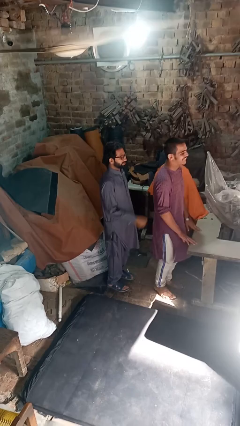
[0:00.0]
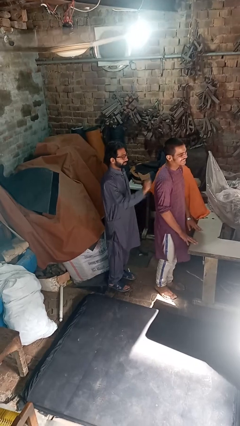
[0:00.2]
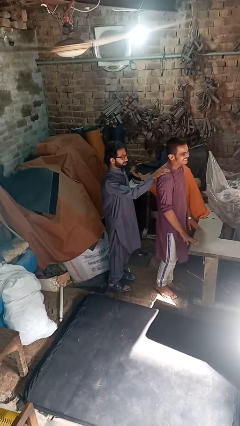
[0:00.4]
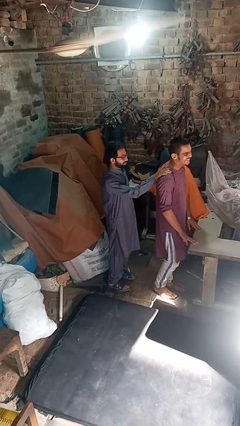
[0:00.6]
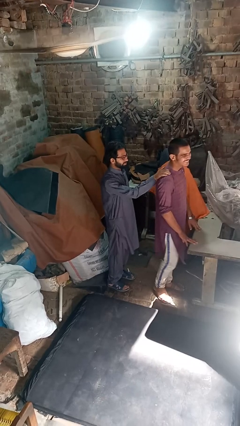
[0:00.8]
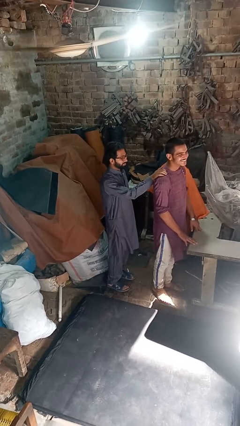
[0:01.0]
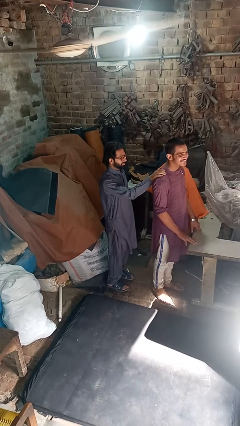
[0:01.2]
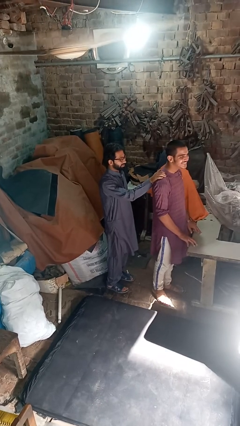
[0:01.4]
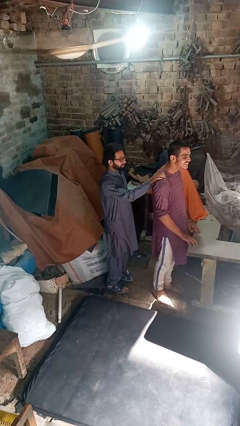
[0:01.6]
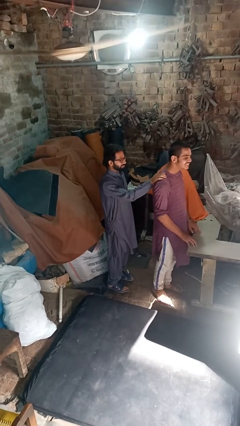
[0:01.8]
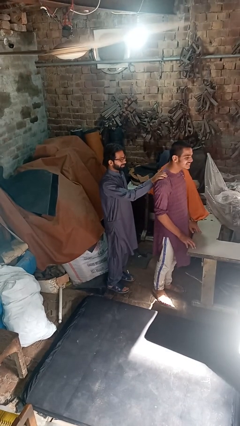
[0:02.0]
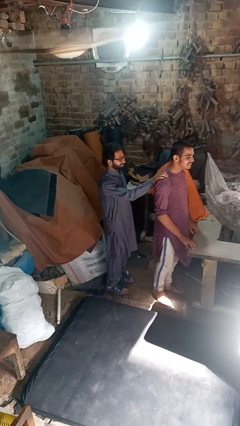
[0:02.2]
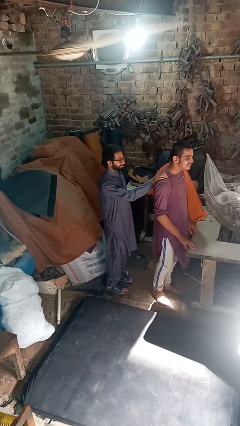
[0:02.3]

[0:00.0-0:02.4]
person grabs person by shoulder

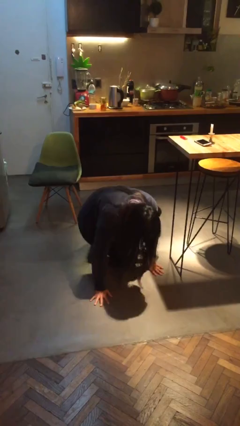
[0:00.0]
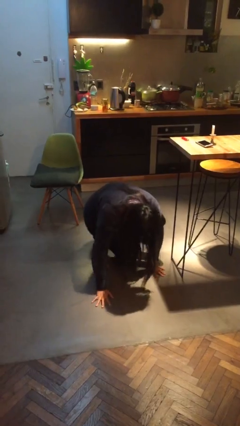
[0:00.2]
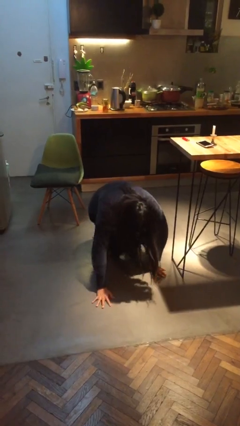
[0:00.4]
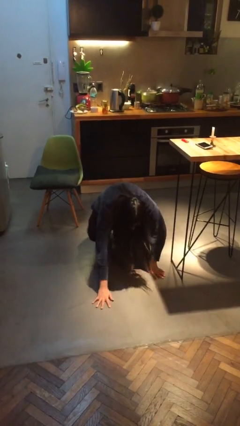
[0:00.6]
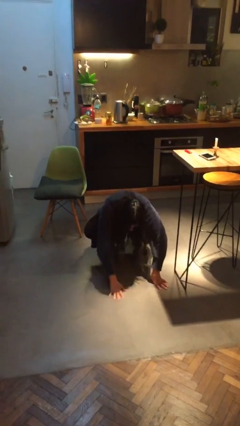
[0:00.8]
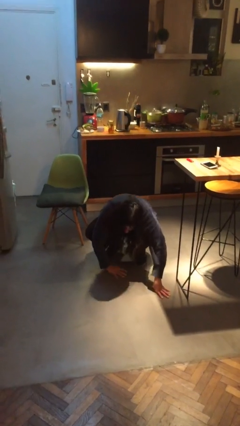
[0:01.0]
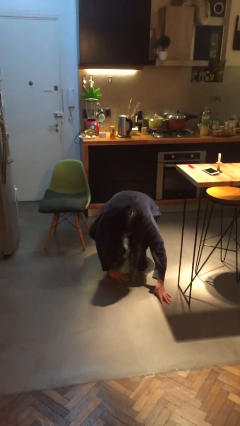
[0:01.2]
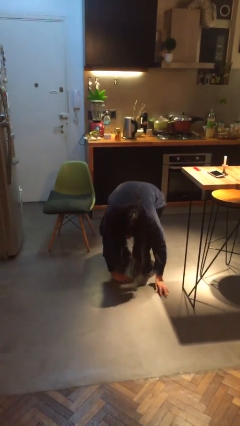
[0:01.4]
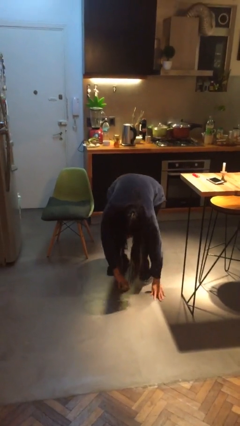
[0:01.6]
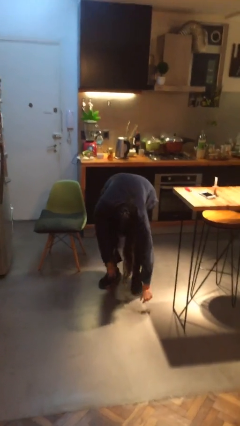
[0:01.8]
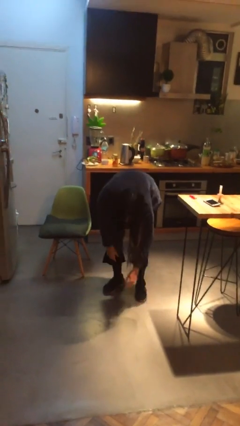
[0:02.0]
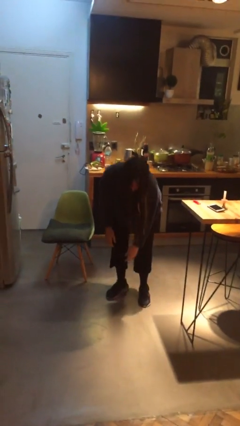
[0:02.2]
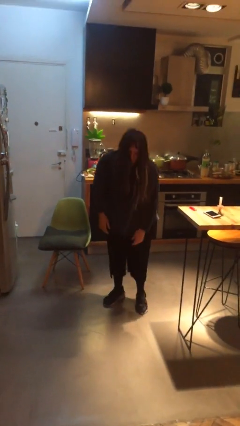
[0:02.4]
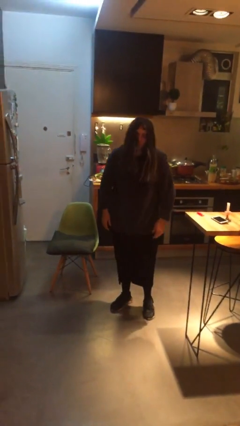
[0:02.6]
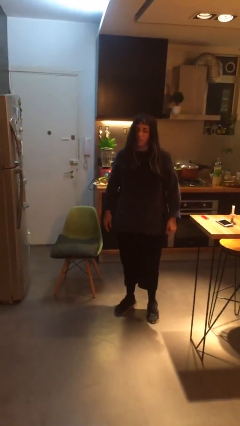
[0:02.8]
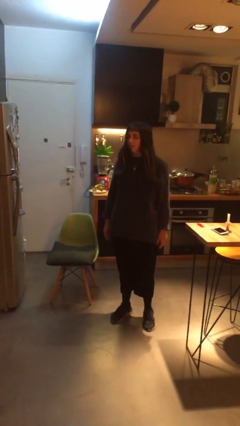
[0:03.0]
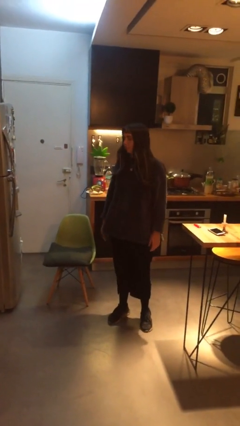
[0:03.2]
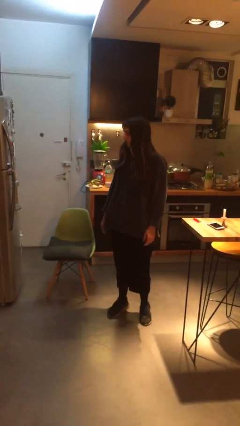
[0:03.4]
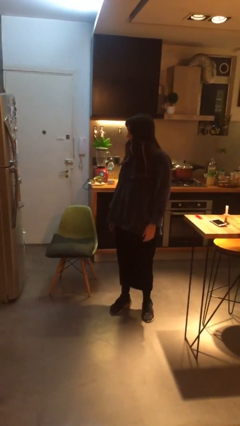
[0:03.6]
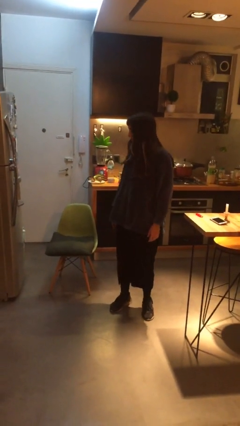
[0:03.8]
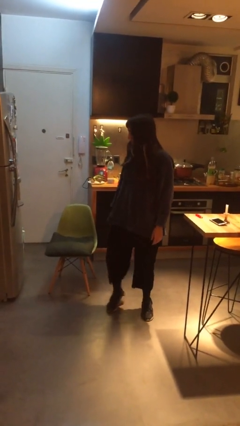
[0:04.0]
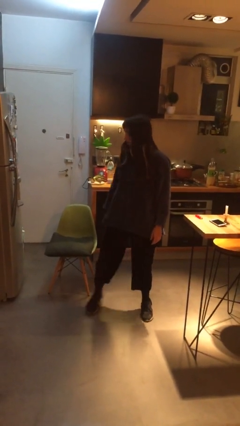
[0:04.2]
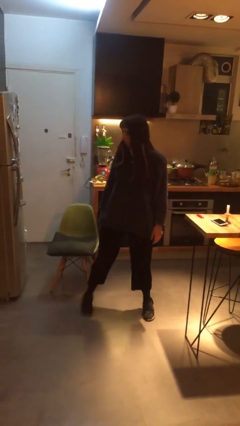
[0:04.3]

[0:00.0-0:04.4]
person stands up from floor

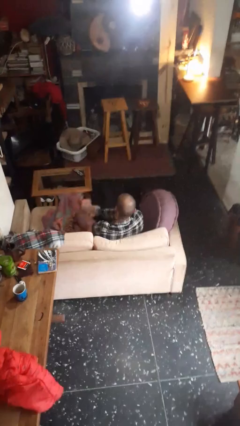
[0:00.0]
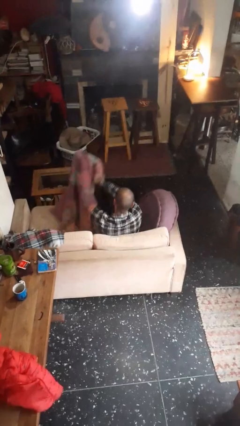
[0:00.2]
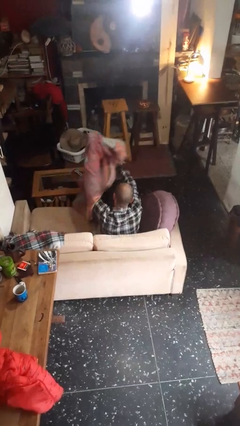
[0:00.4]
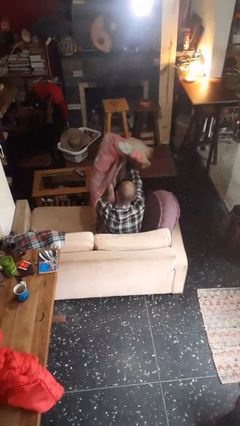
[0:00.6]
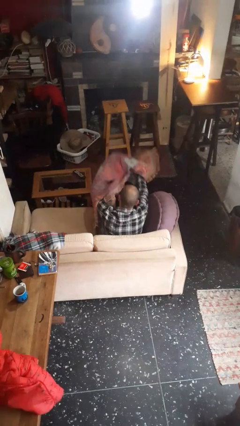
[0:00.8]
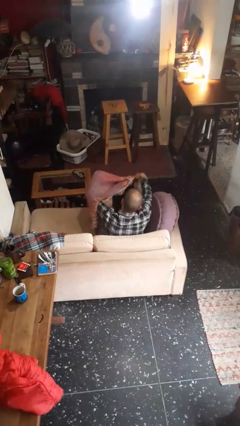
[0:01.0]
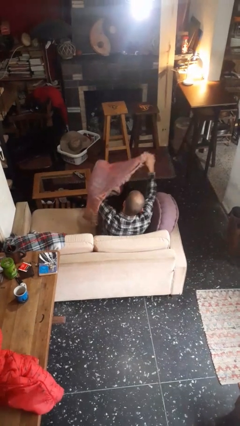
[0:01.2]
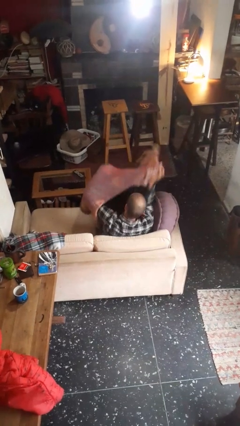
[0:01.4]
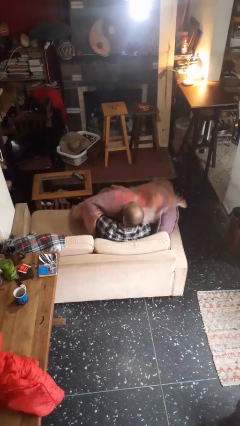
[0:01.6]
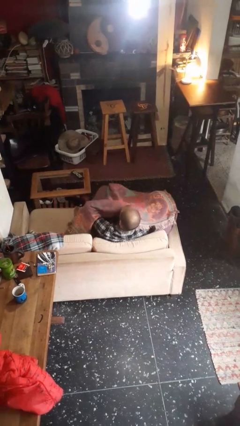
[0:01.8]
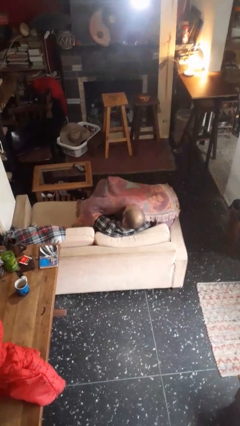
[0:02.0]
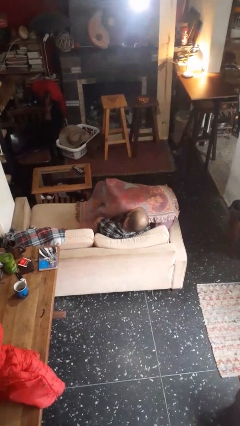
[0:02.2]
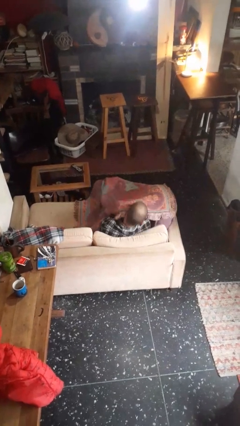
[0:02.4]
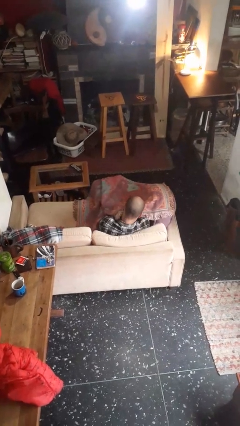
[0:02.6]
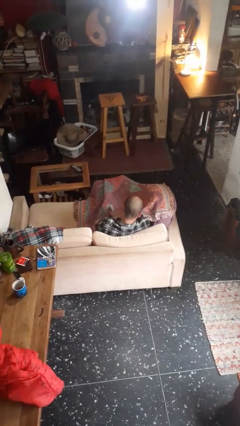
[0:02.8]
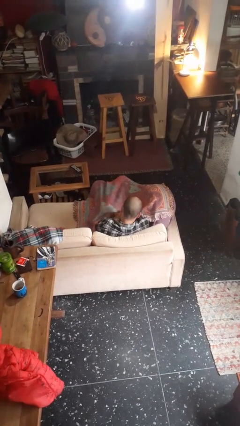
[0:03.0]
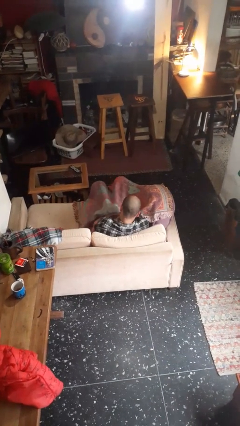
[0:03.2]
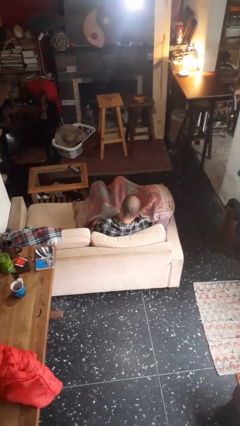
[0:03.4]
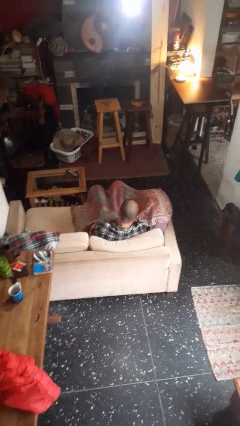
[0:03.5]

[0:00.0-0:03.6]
person covers with blanket

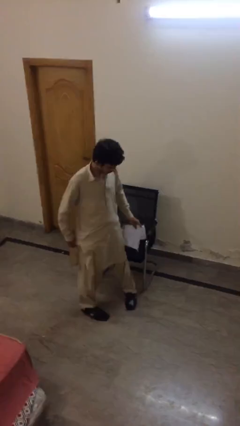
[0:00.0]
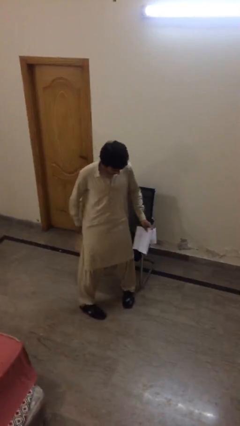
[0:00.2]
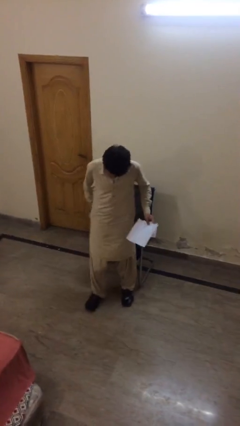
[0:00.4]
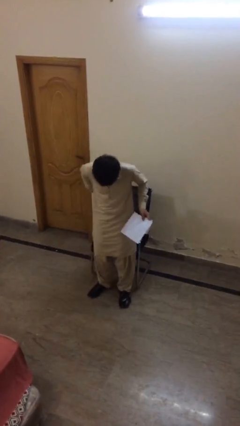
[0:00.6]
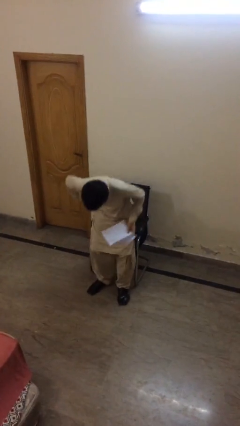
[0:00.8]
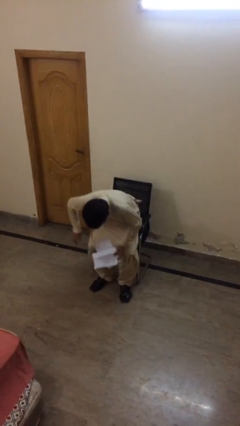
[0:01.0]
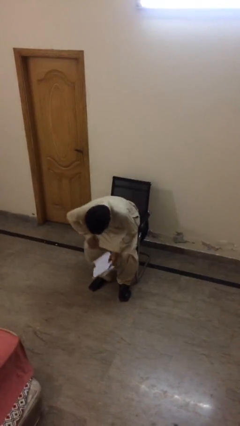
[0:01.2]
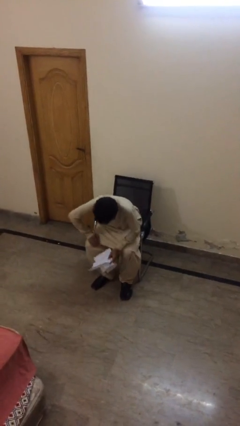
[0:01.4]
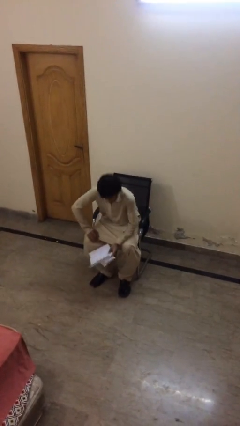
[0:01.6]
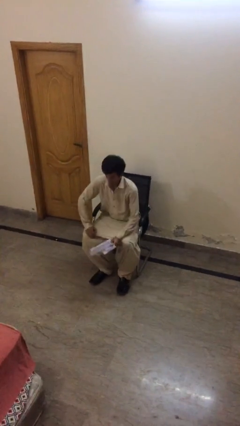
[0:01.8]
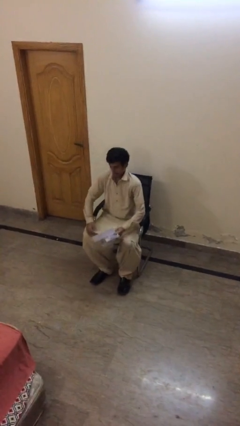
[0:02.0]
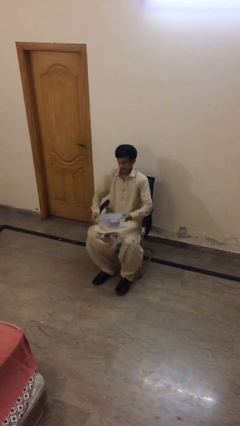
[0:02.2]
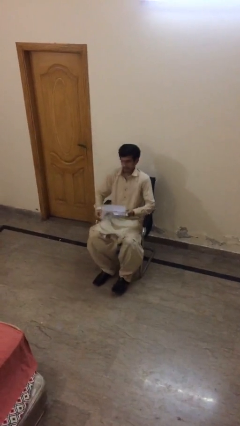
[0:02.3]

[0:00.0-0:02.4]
person sits down

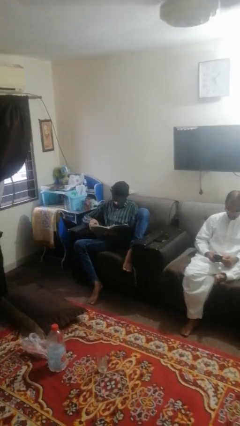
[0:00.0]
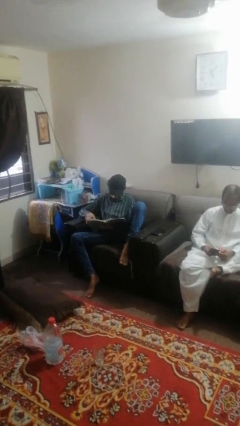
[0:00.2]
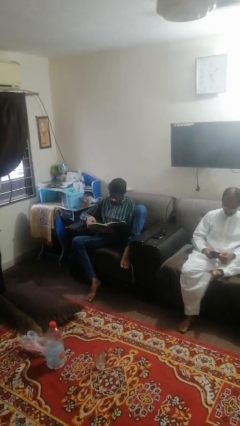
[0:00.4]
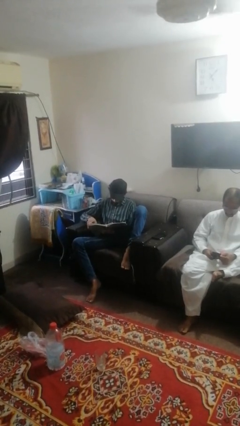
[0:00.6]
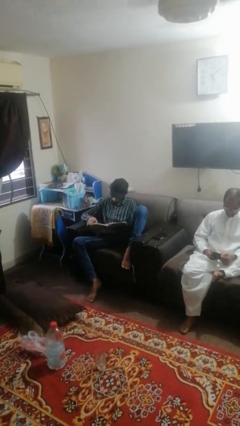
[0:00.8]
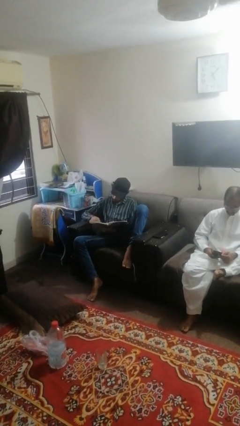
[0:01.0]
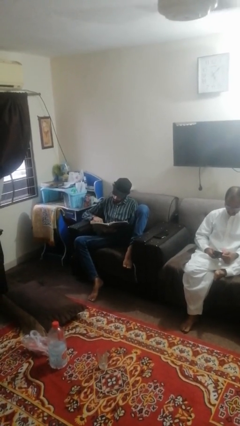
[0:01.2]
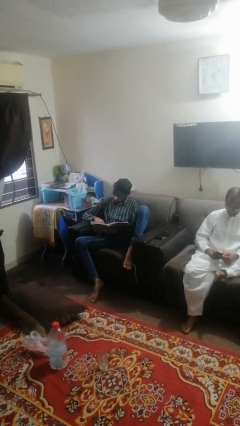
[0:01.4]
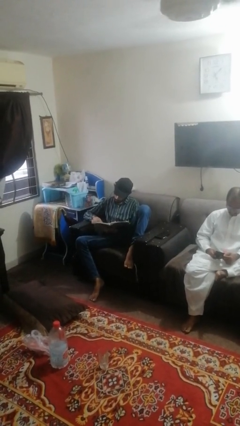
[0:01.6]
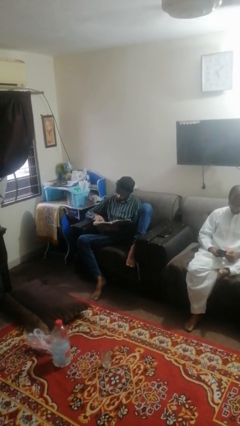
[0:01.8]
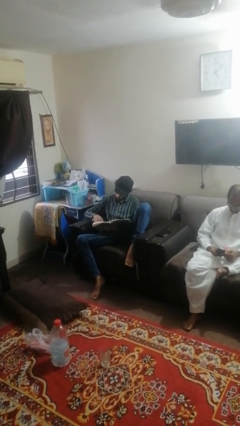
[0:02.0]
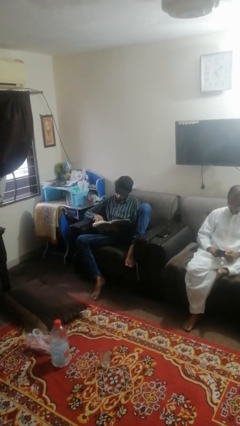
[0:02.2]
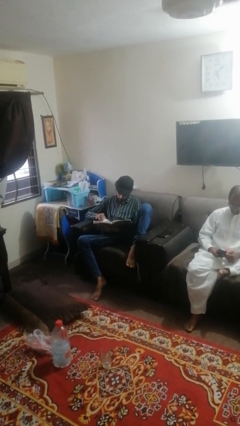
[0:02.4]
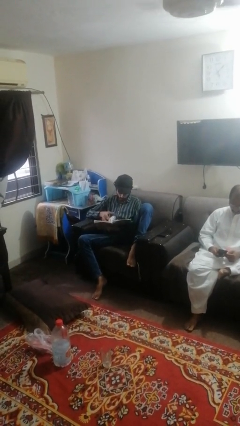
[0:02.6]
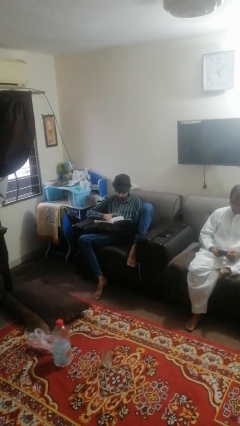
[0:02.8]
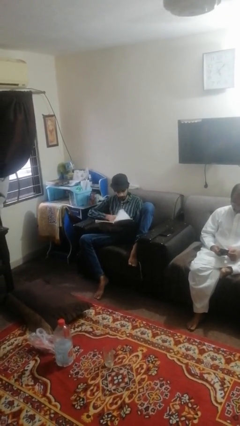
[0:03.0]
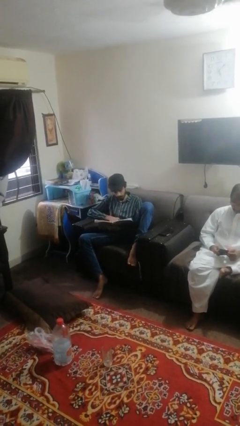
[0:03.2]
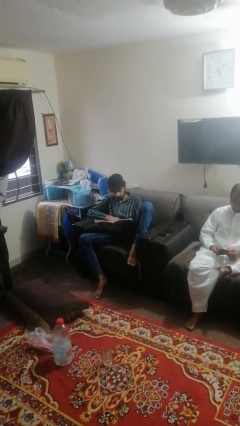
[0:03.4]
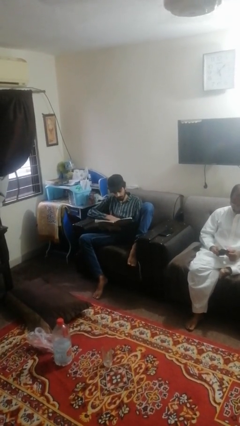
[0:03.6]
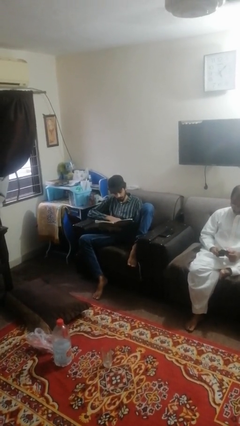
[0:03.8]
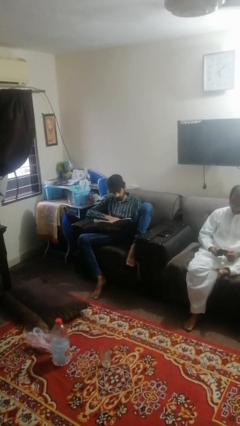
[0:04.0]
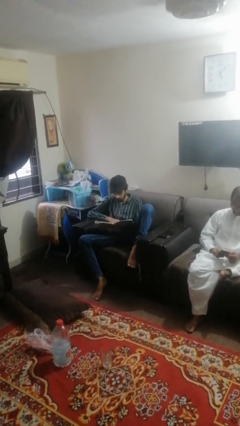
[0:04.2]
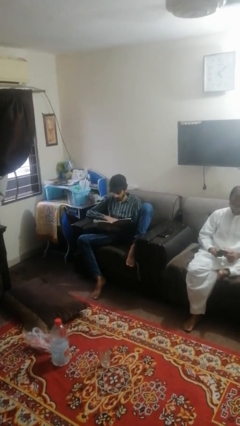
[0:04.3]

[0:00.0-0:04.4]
person reads magazine

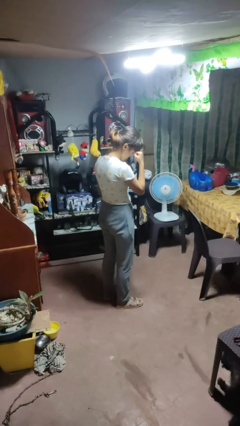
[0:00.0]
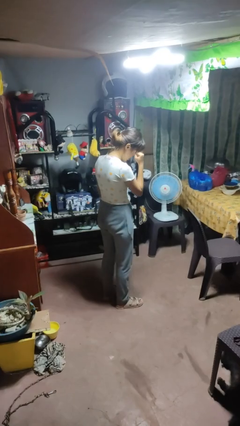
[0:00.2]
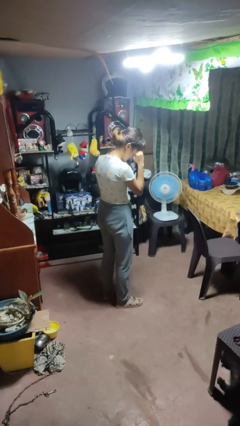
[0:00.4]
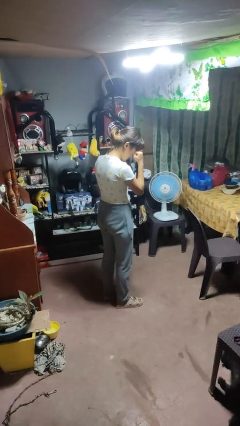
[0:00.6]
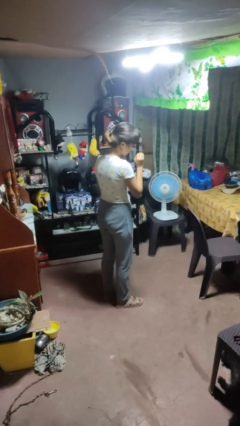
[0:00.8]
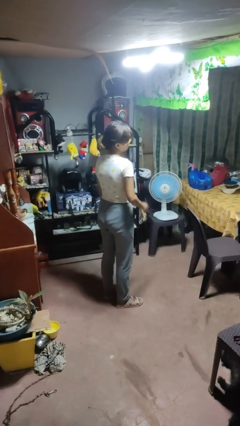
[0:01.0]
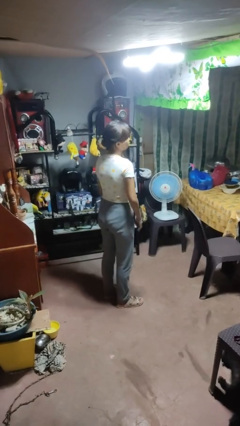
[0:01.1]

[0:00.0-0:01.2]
person rubs eyes
